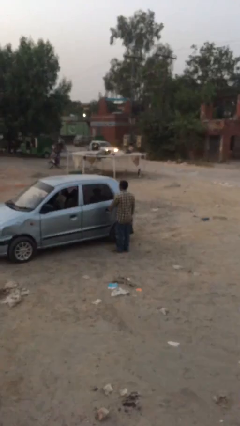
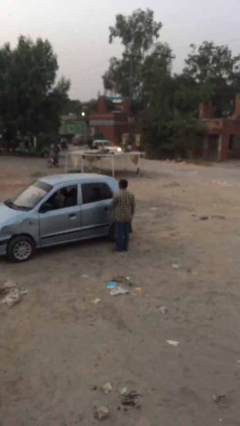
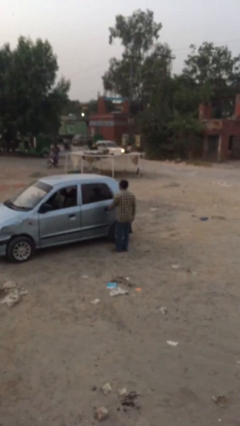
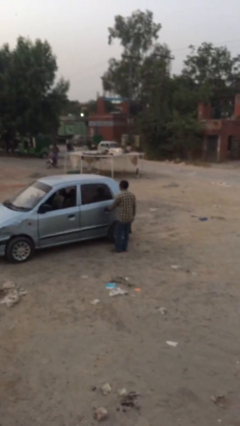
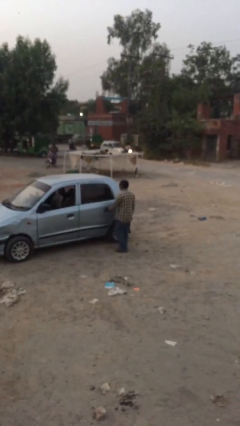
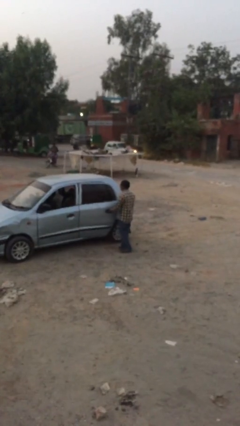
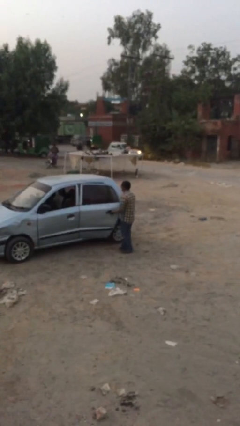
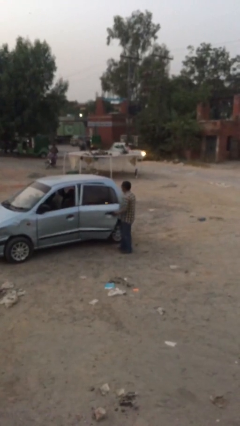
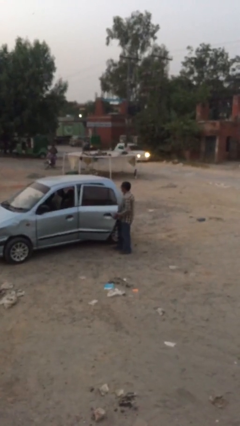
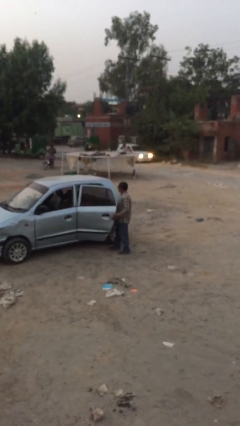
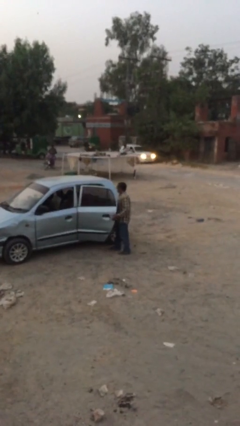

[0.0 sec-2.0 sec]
person opens car door

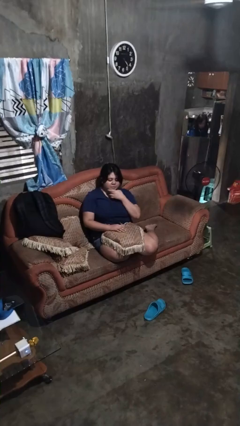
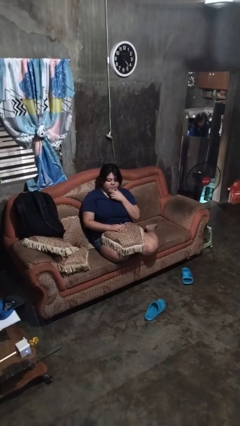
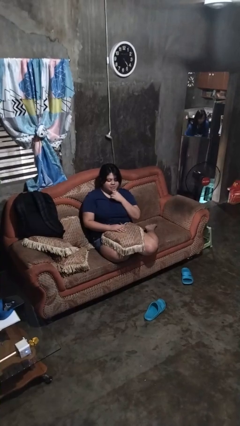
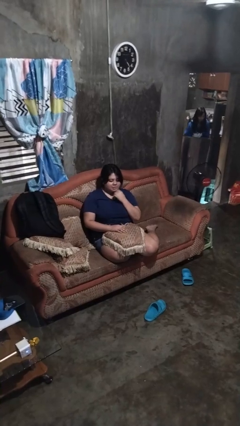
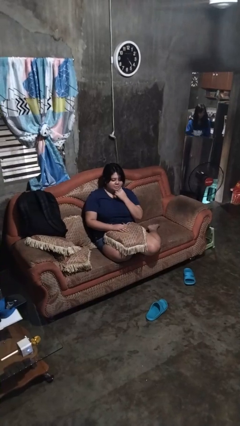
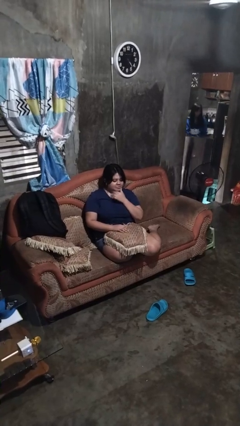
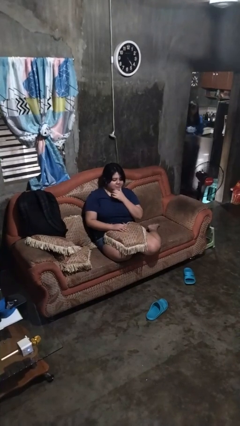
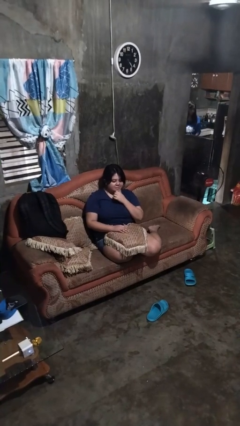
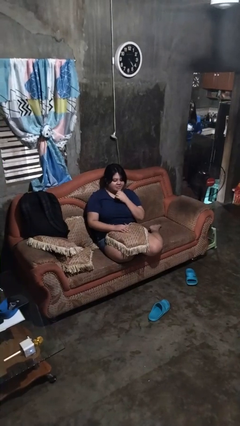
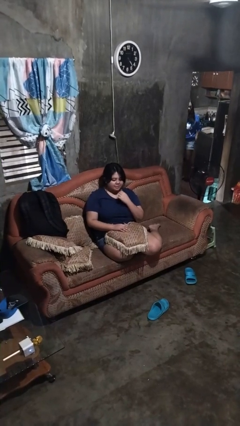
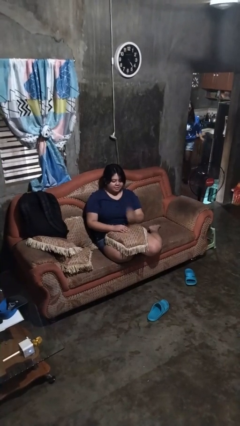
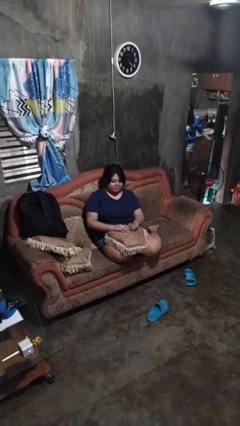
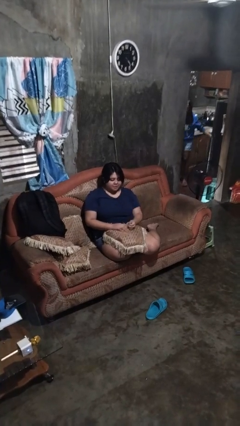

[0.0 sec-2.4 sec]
person strokes chin

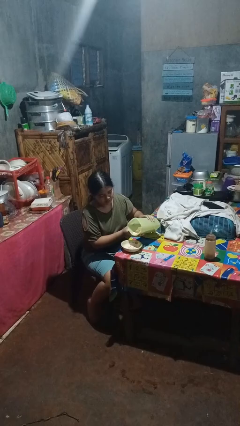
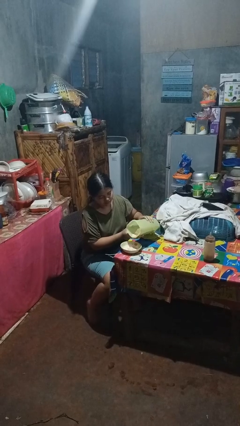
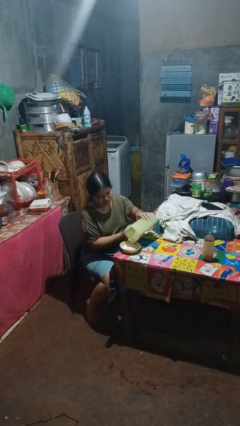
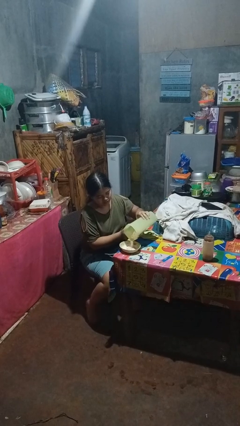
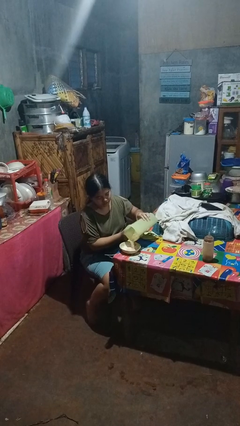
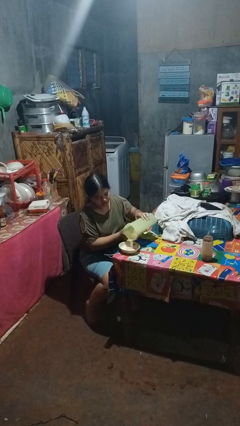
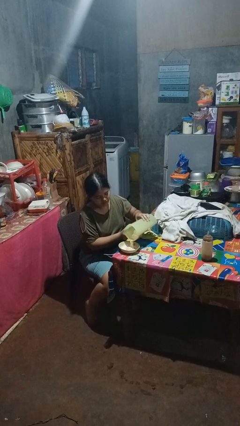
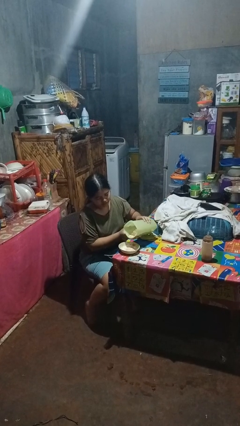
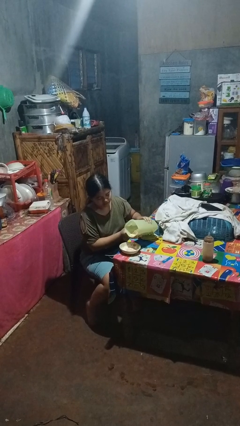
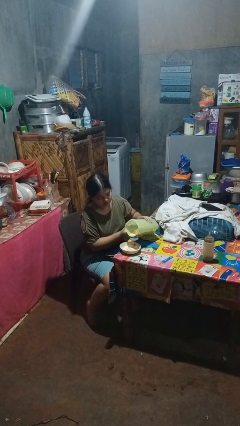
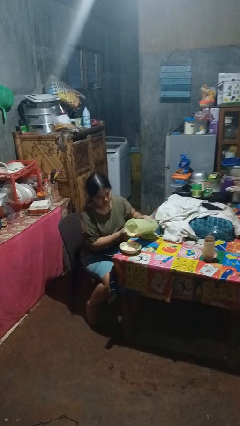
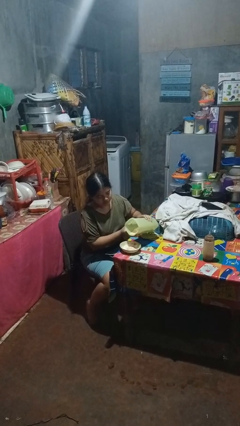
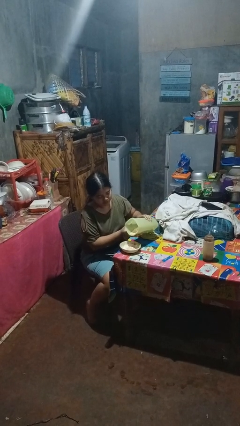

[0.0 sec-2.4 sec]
person pours into bowl

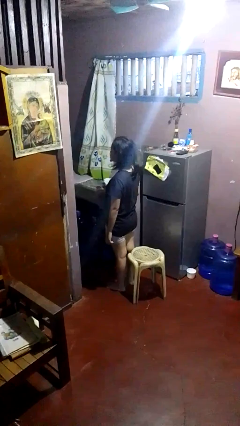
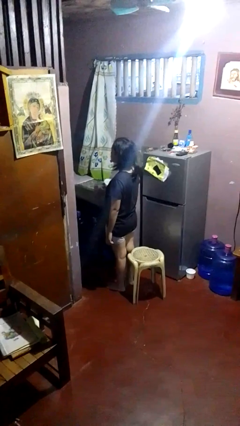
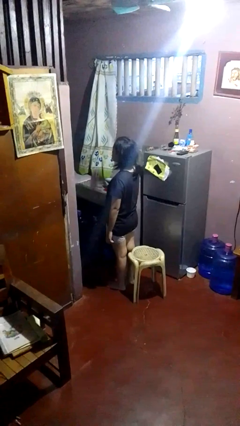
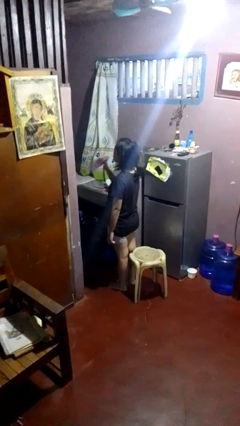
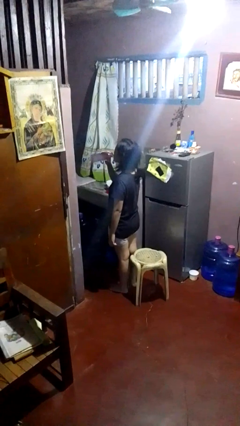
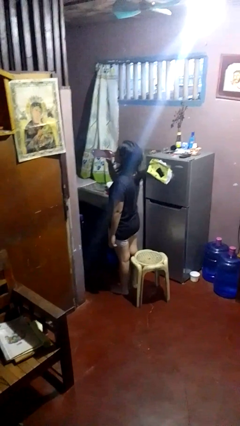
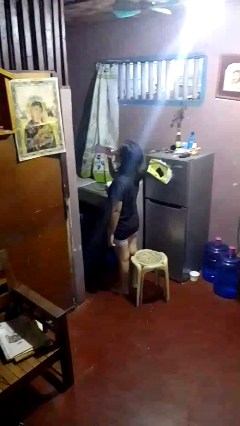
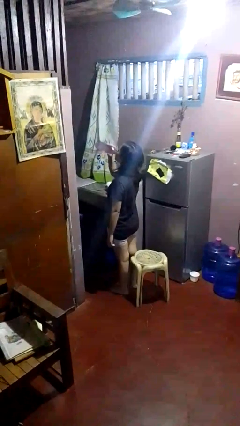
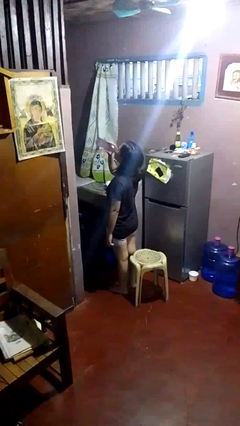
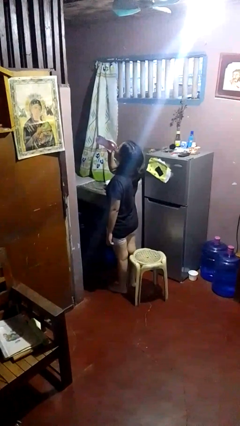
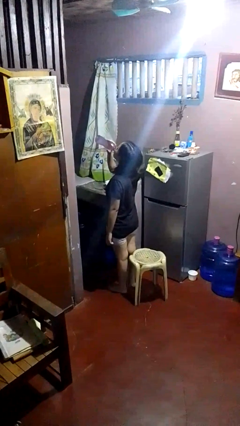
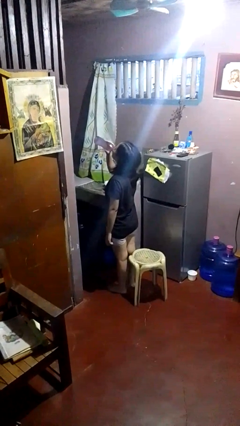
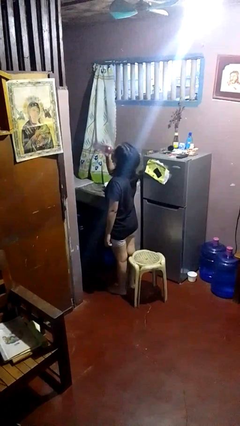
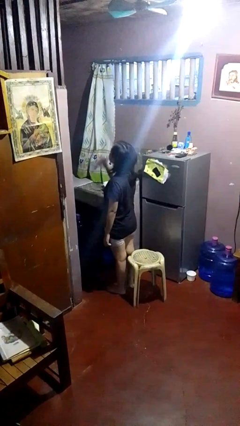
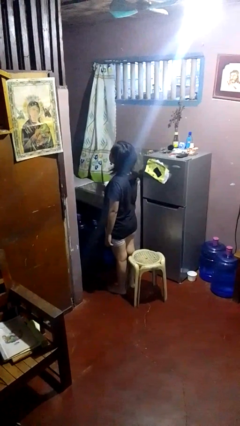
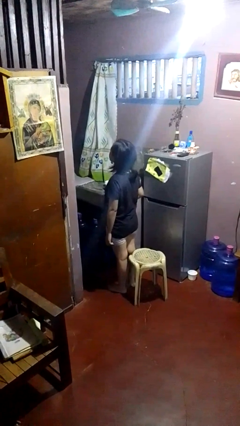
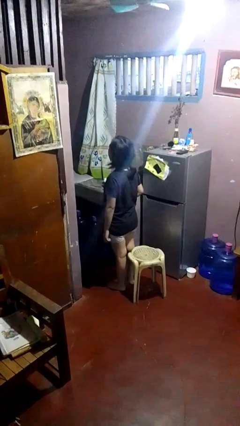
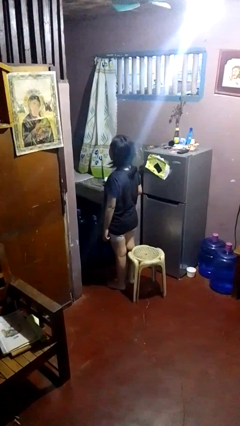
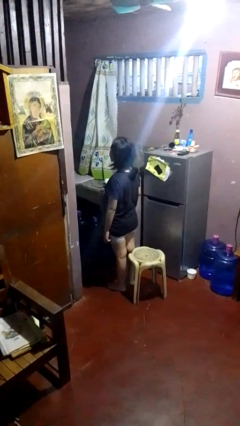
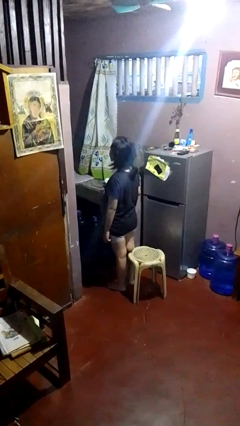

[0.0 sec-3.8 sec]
person drinks from bottle

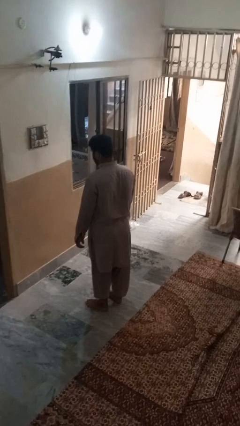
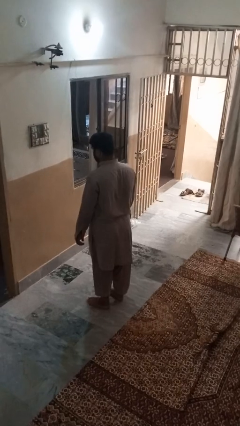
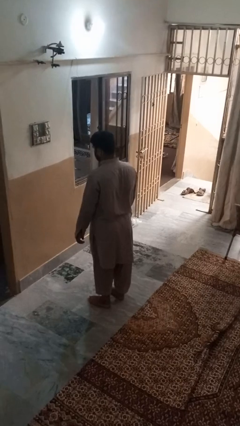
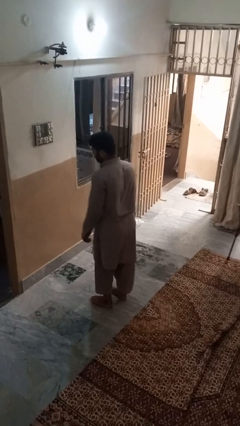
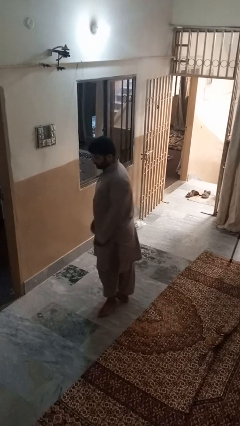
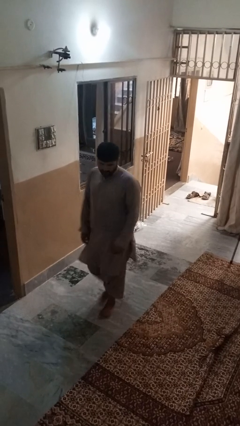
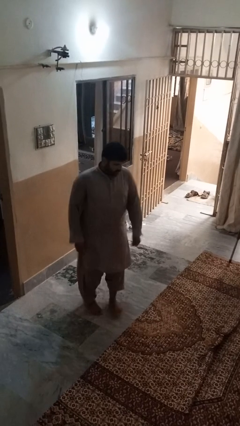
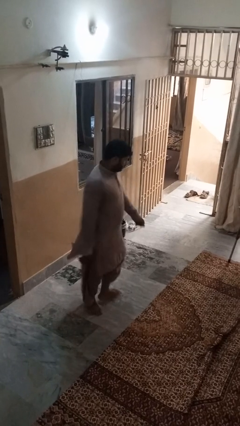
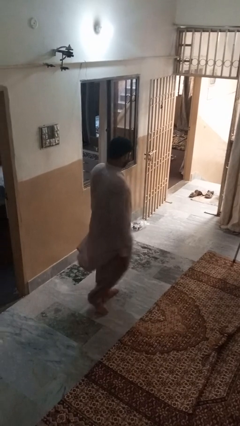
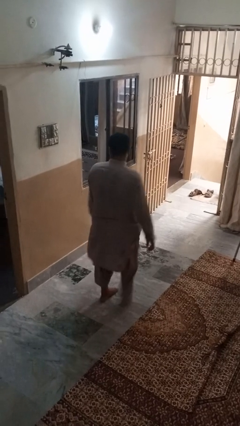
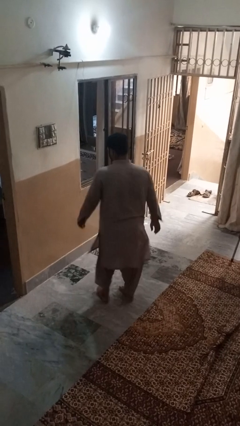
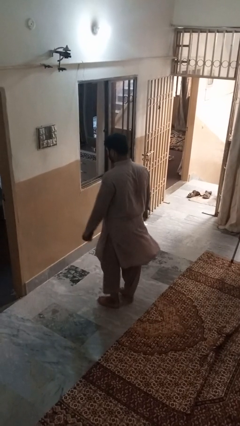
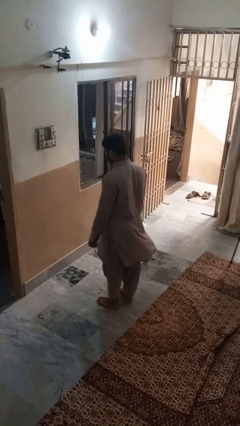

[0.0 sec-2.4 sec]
person twirls

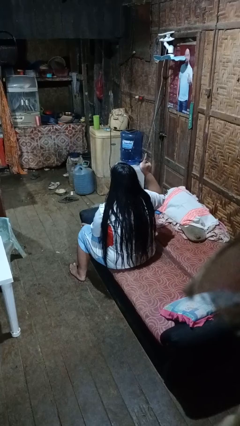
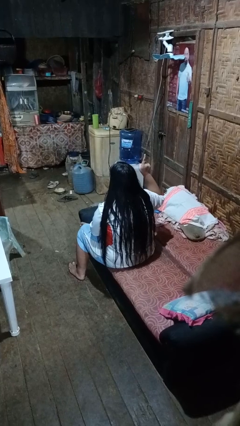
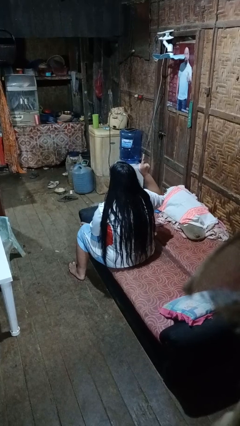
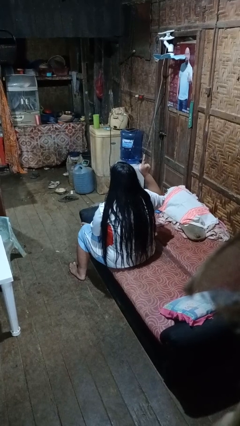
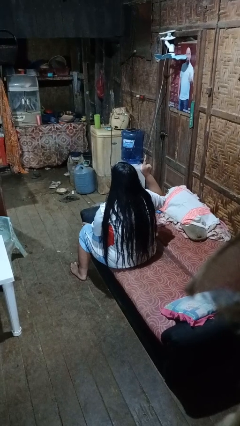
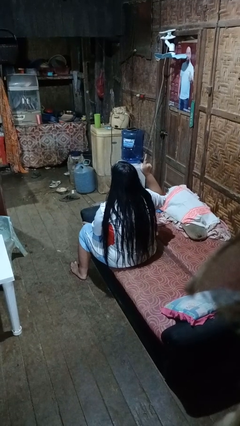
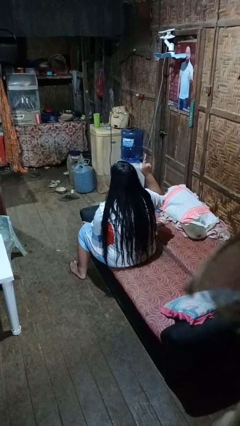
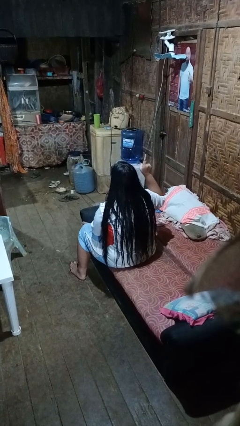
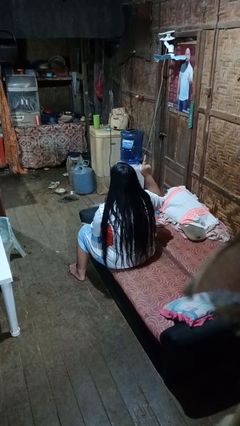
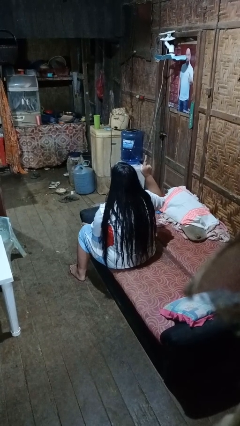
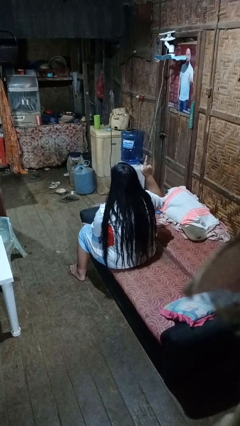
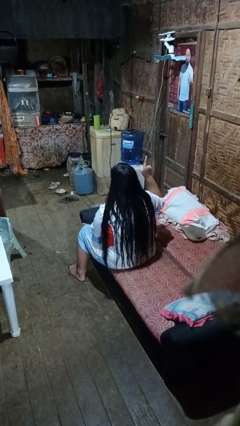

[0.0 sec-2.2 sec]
person gestures number one

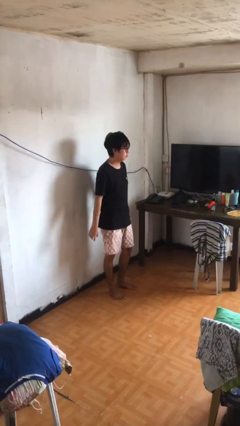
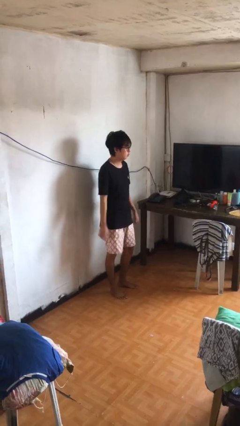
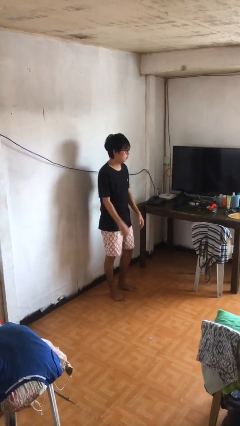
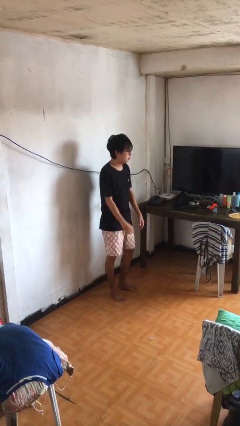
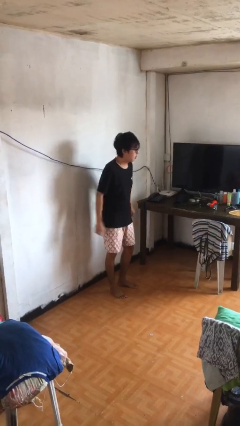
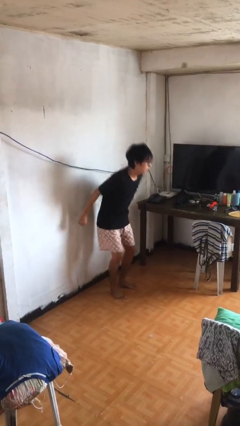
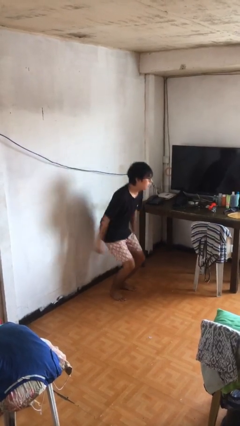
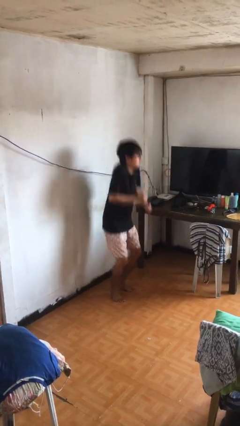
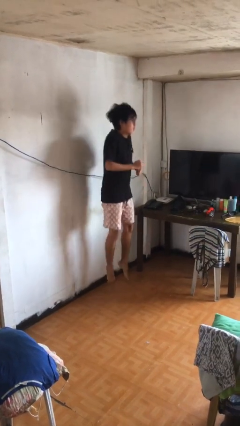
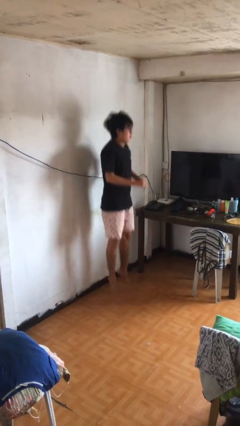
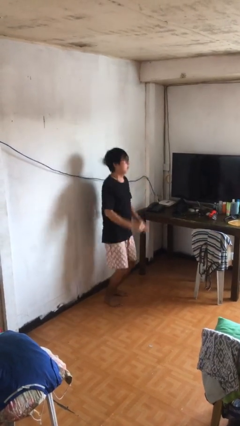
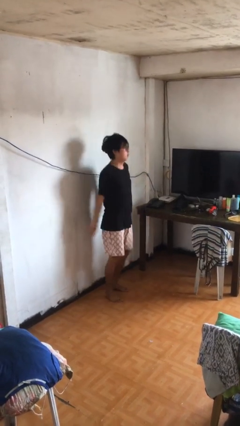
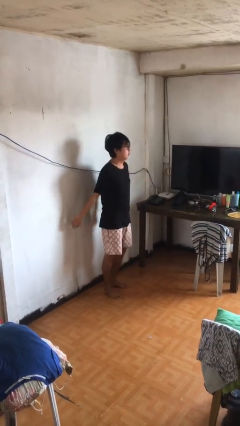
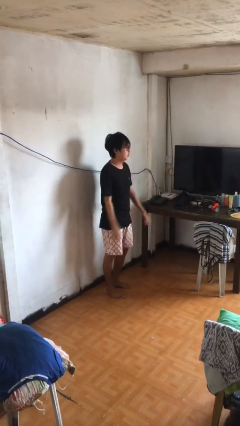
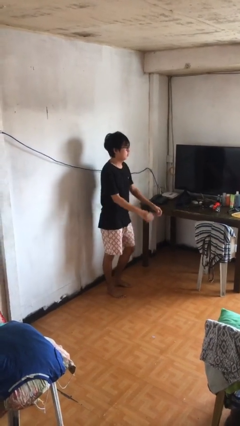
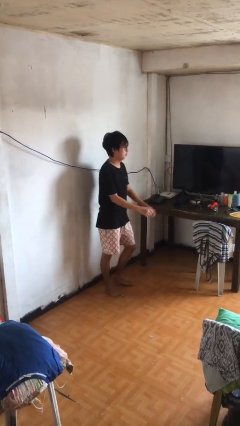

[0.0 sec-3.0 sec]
person jumps
